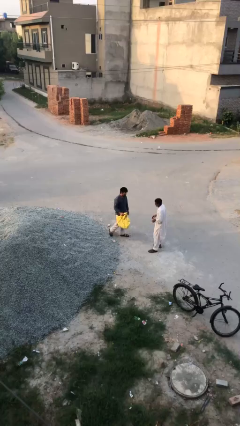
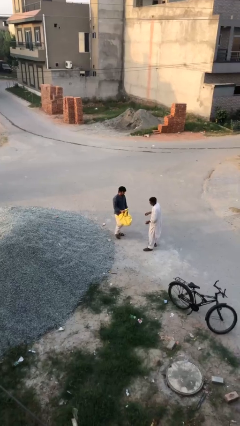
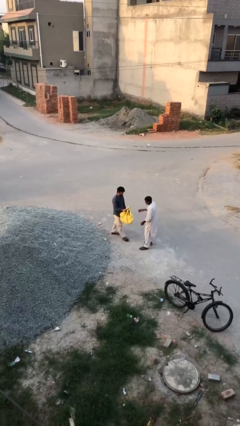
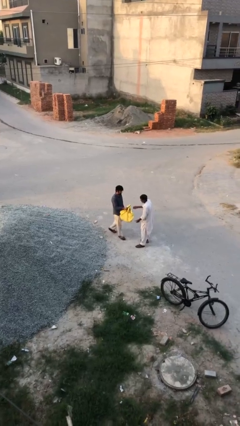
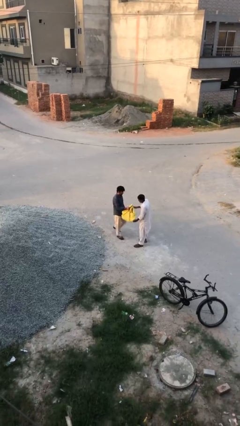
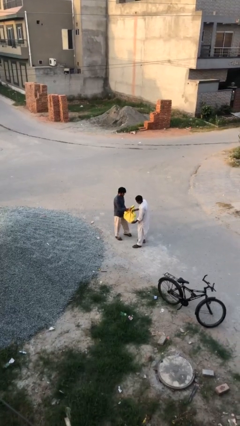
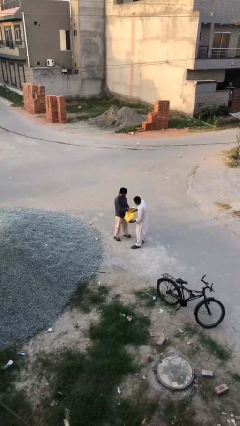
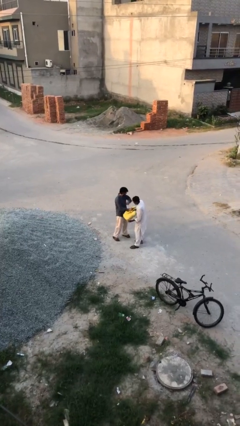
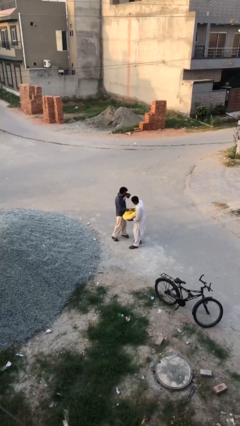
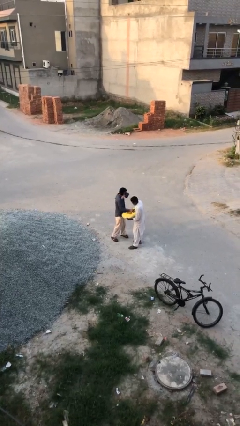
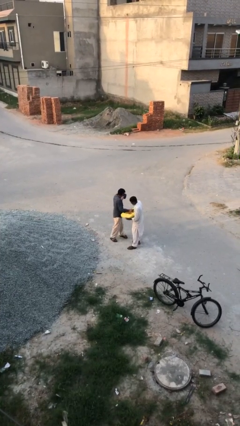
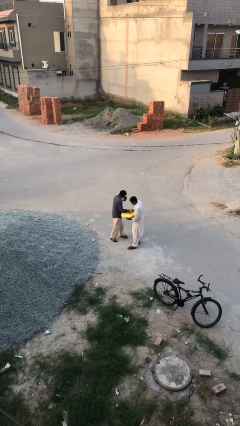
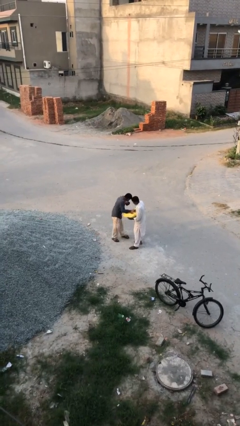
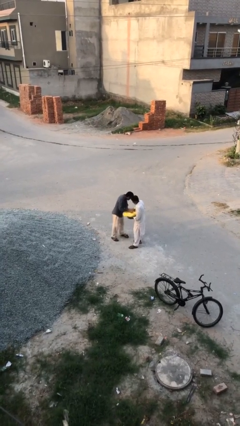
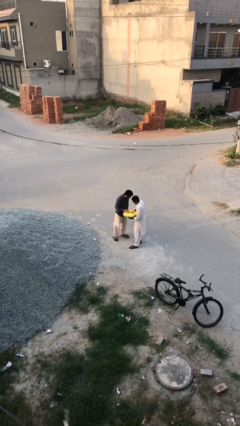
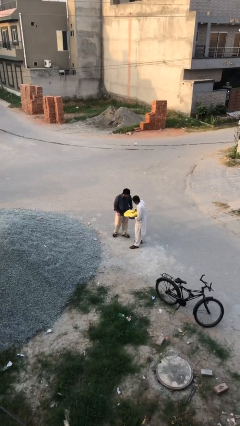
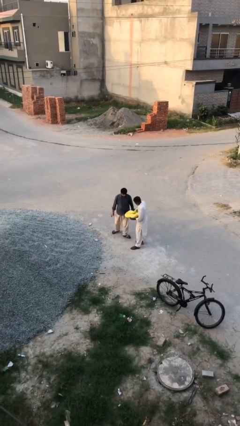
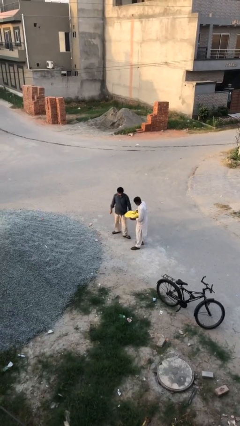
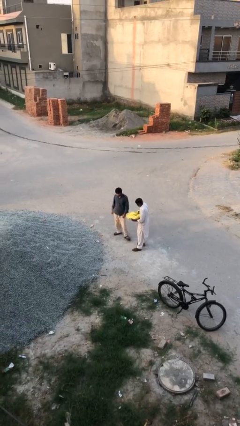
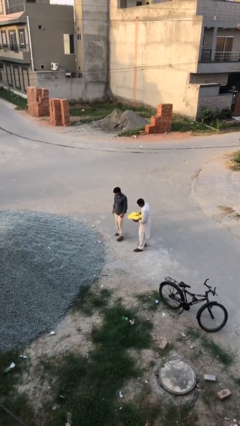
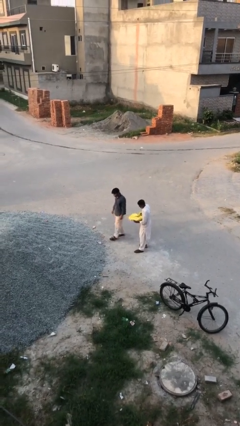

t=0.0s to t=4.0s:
person transfers object to person

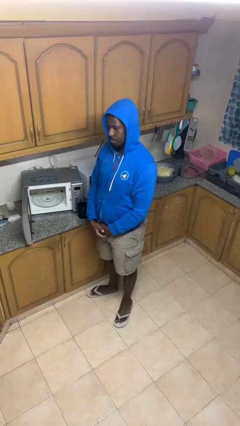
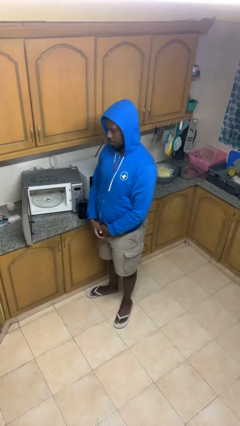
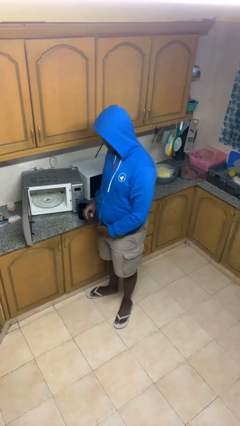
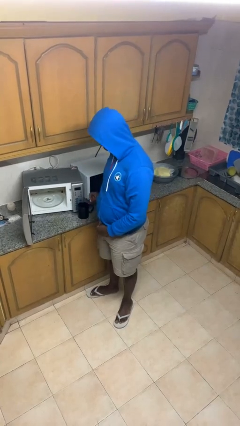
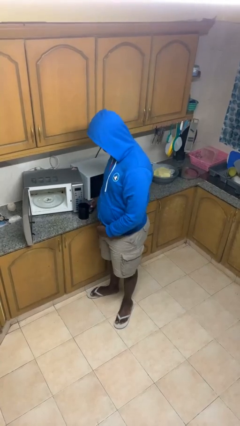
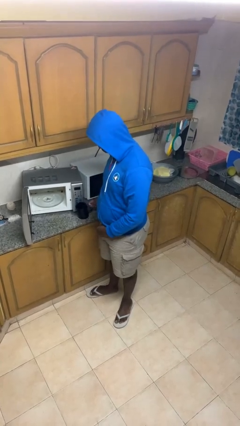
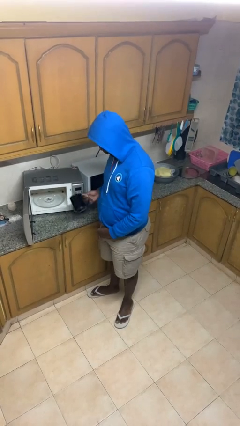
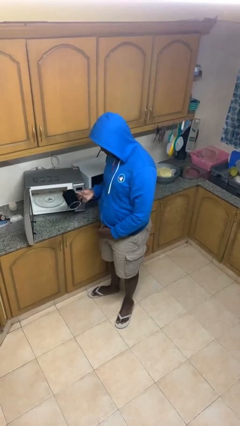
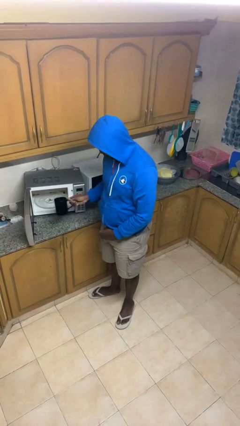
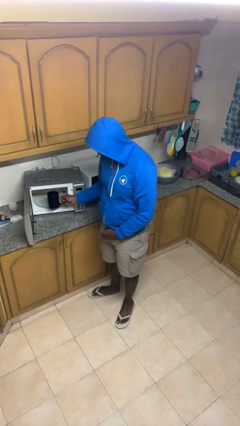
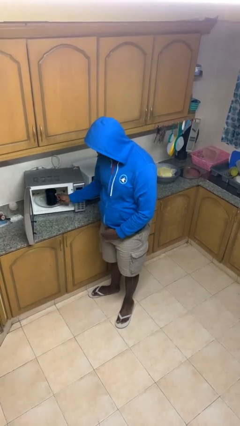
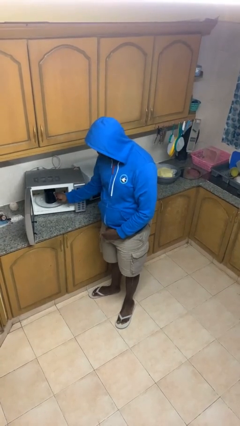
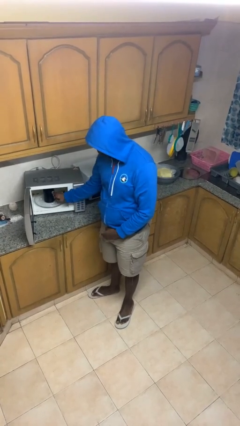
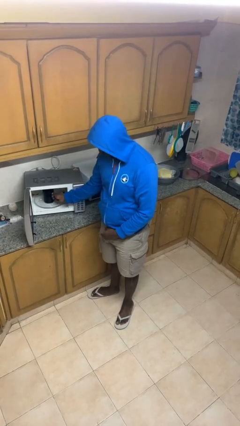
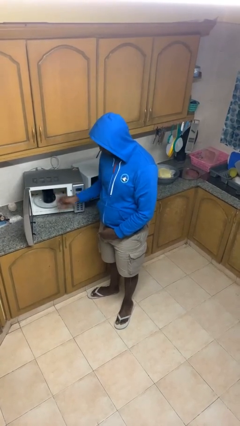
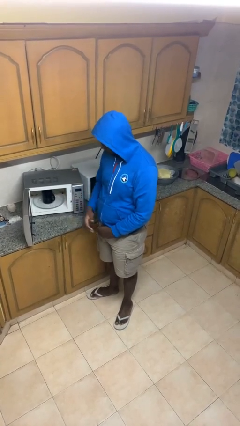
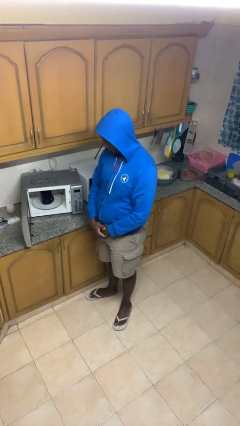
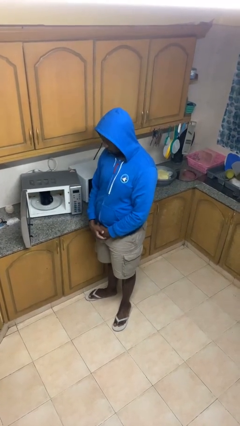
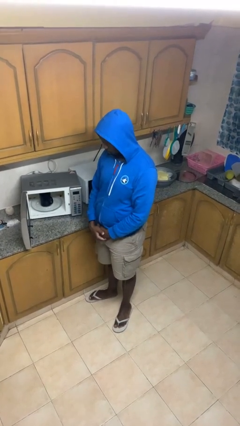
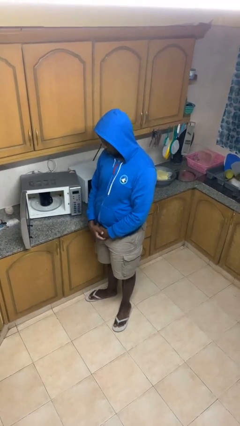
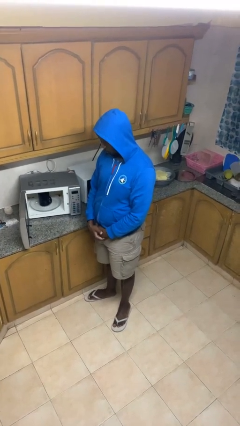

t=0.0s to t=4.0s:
person puts object into microwave

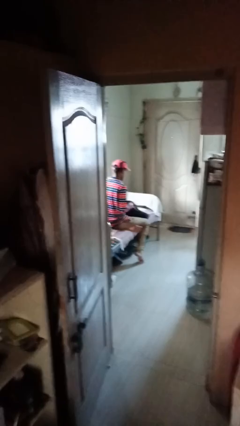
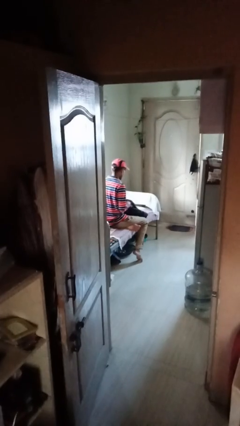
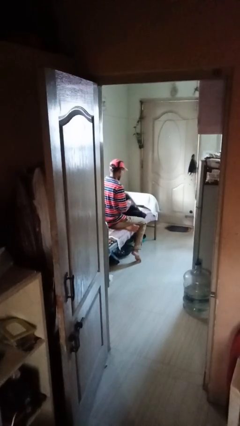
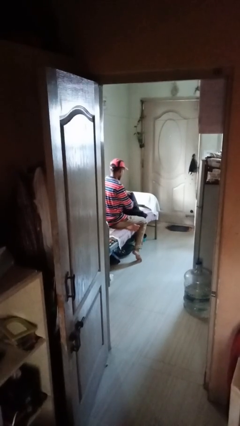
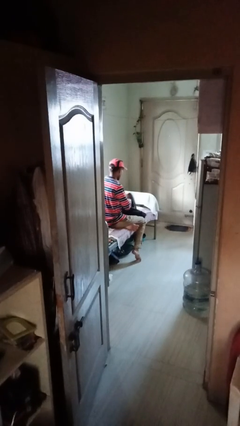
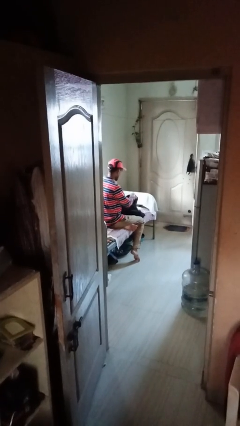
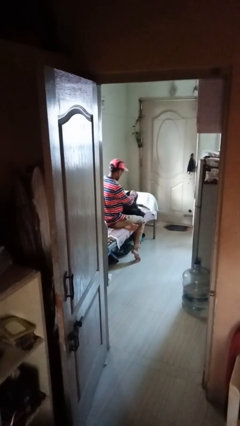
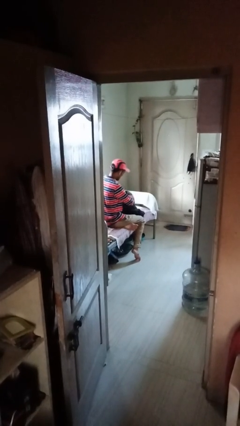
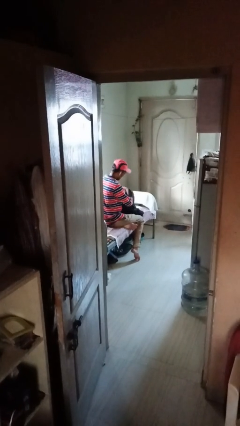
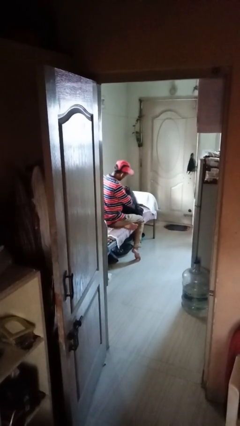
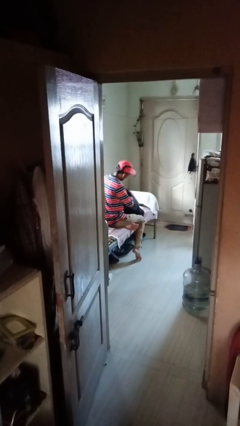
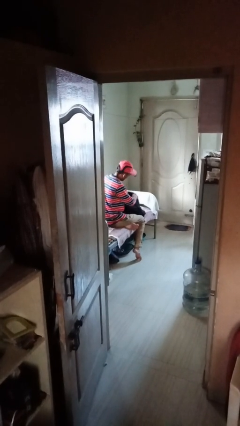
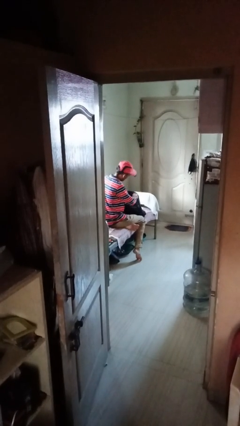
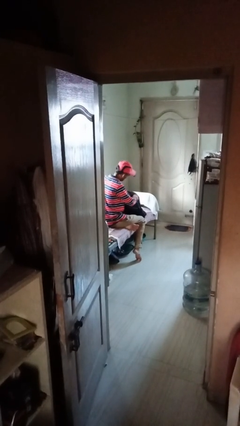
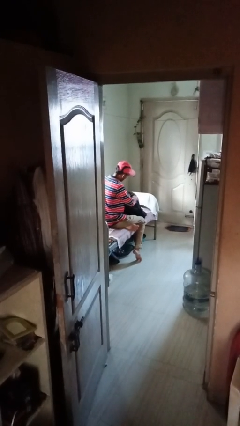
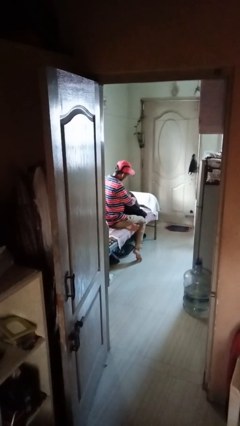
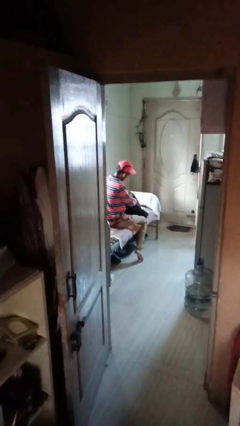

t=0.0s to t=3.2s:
person searches in backpack

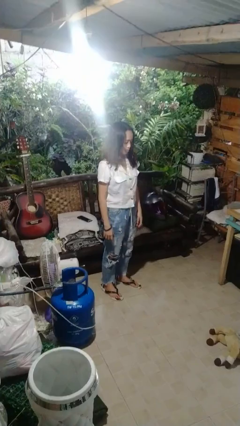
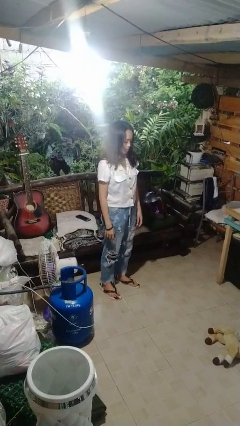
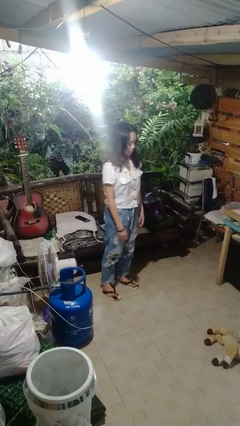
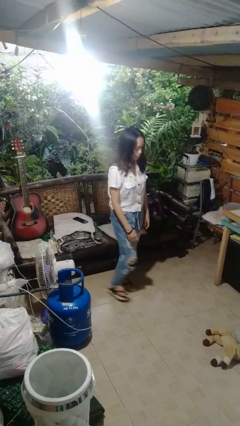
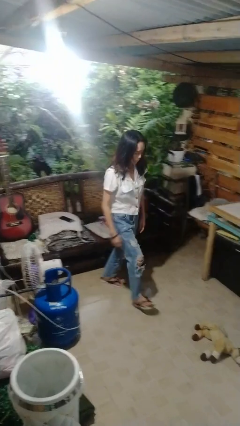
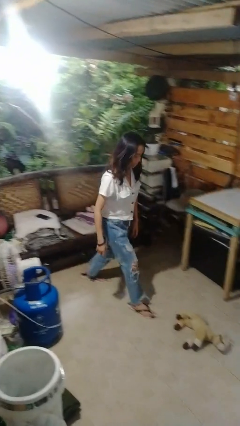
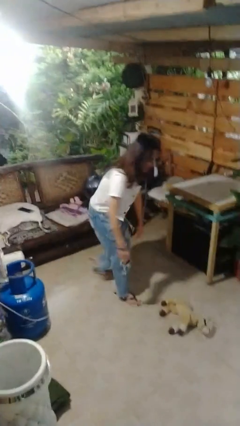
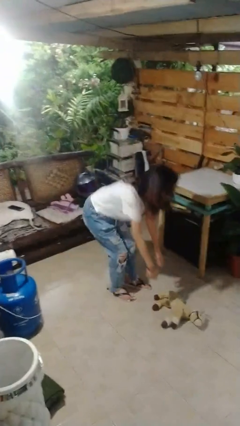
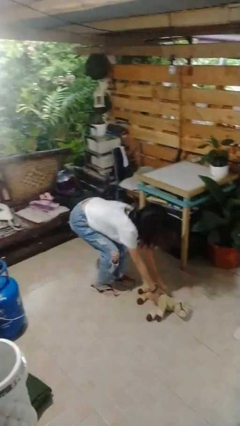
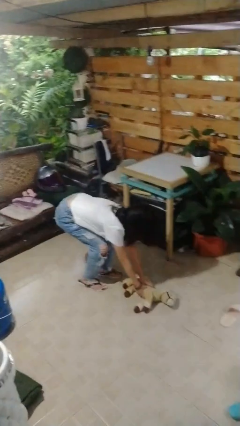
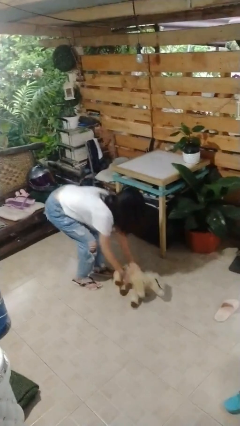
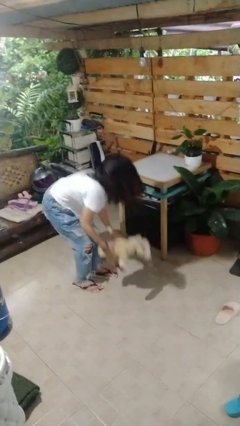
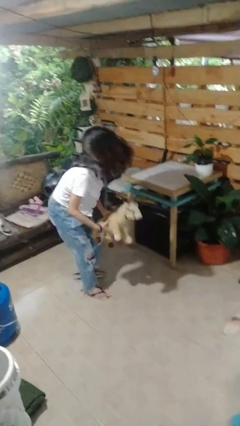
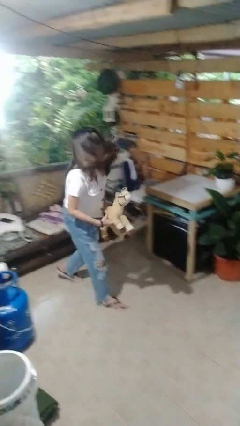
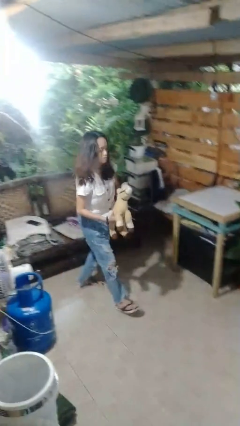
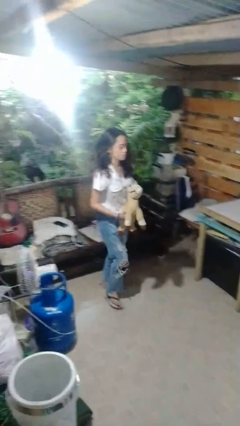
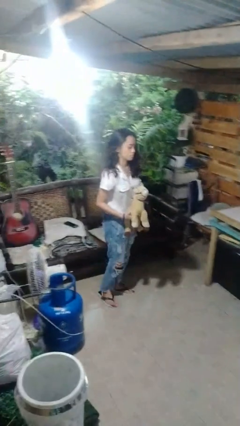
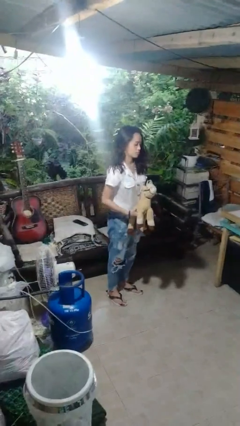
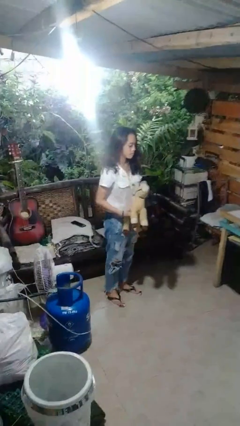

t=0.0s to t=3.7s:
person picks up object from floor

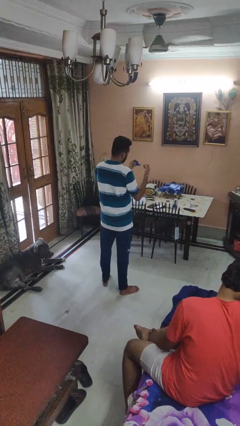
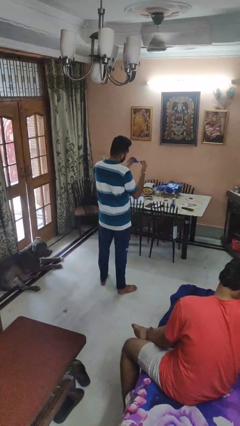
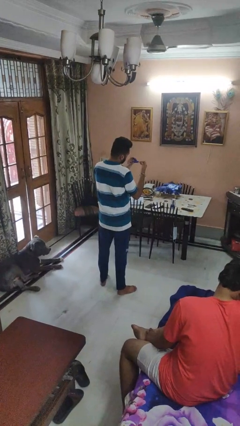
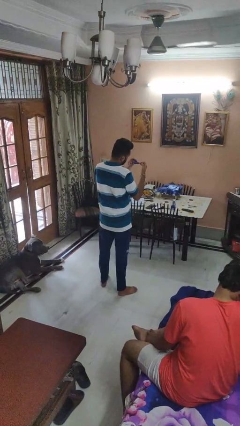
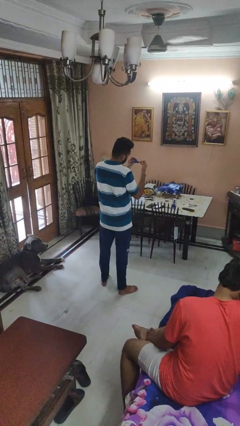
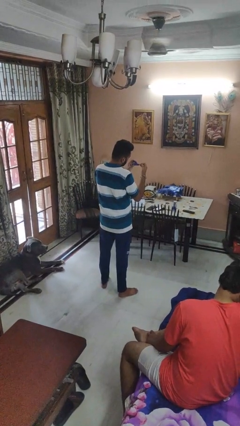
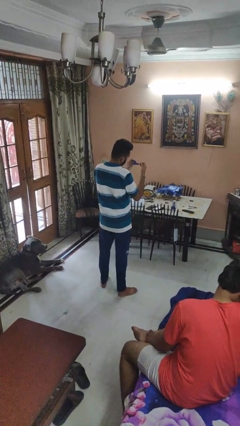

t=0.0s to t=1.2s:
person clips fingernails

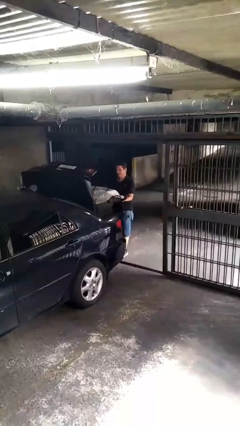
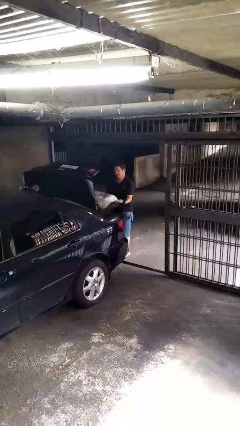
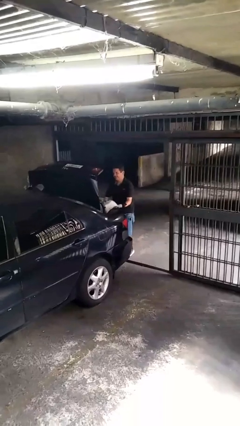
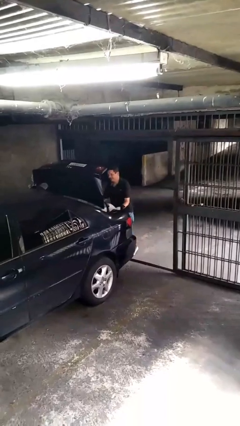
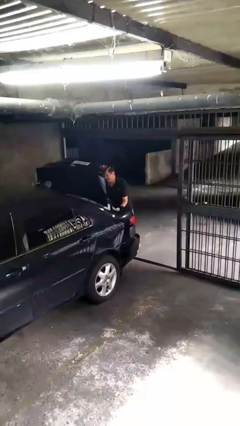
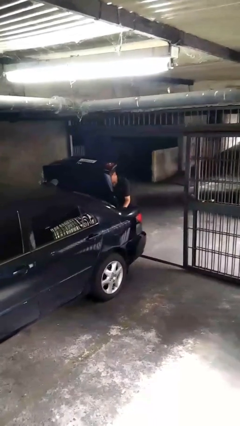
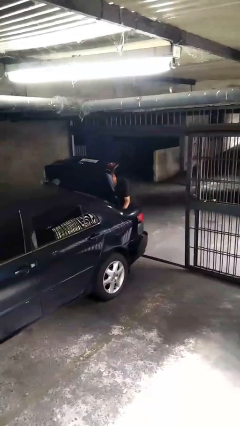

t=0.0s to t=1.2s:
person loads car
